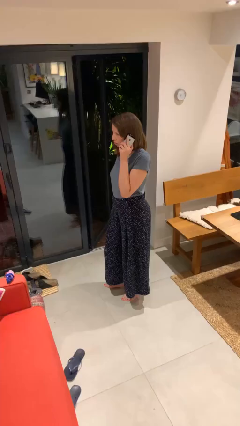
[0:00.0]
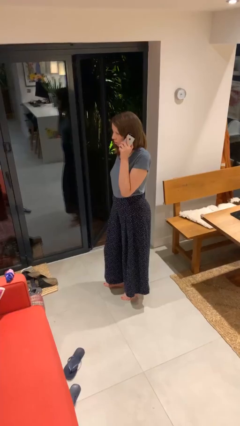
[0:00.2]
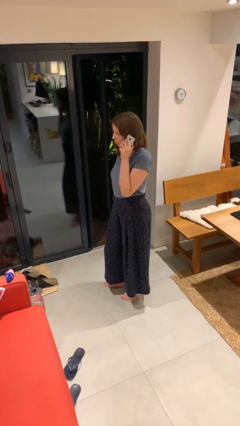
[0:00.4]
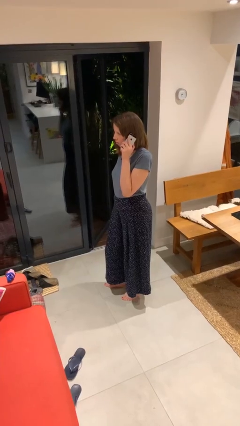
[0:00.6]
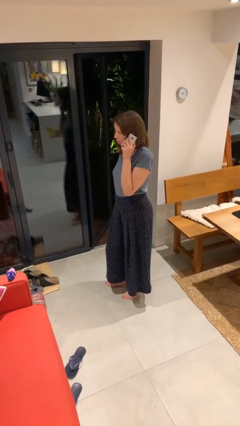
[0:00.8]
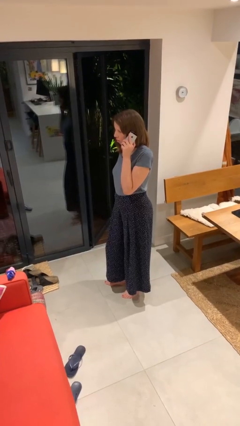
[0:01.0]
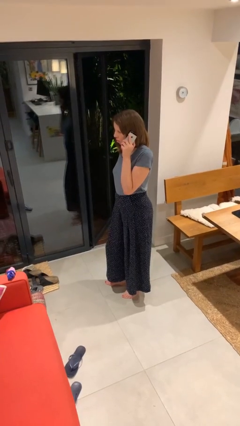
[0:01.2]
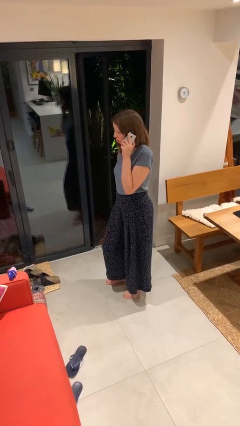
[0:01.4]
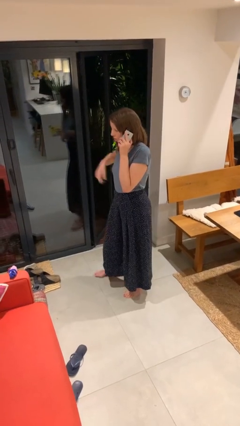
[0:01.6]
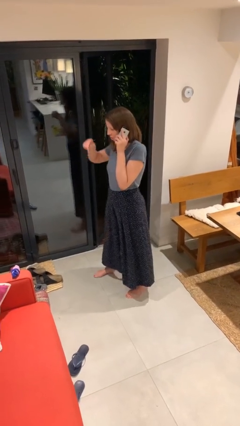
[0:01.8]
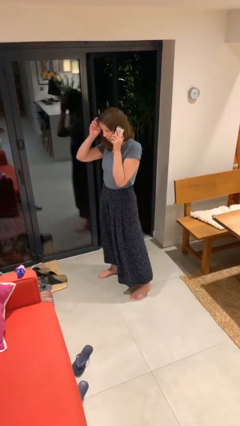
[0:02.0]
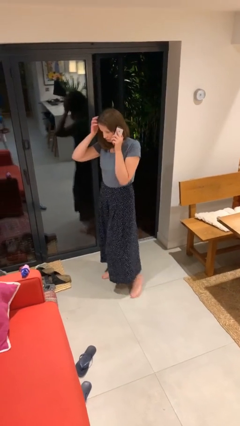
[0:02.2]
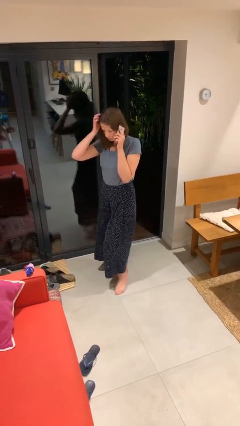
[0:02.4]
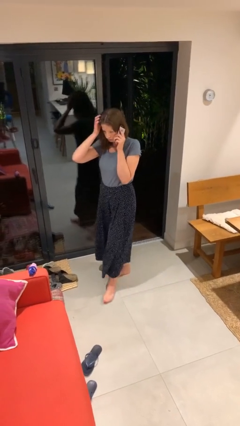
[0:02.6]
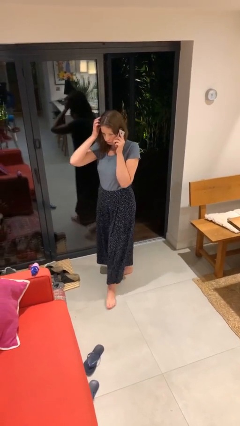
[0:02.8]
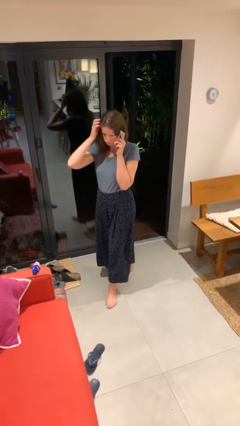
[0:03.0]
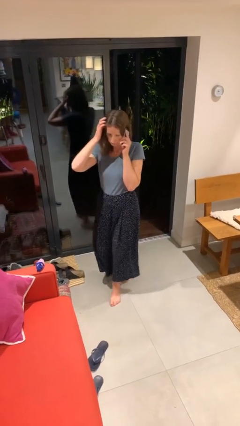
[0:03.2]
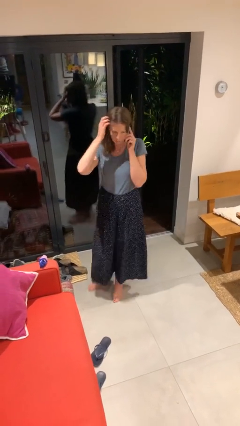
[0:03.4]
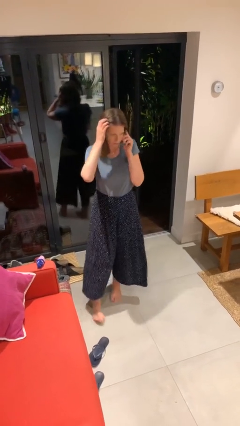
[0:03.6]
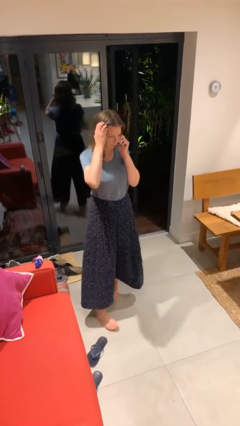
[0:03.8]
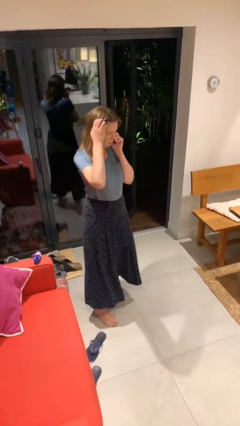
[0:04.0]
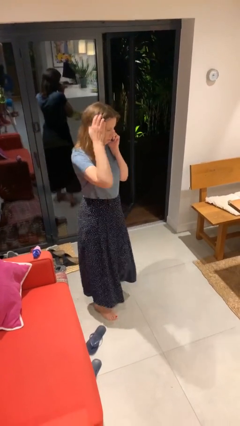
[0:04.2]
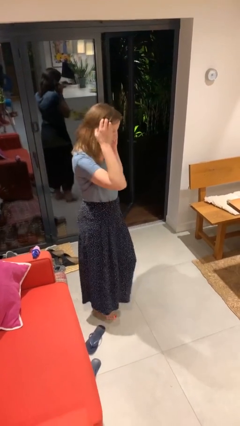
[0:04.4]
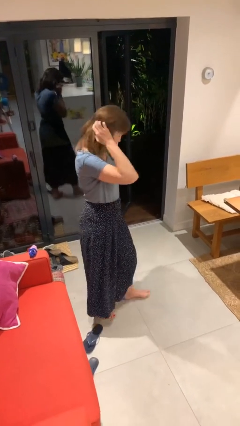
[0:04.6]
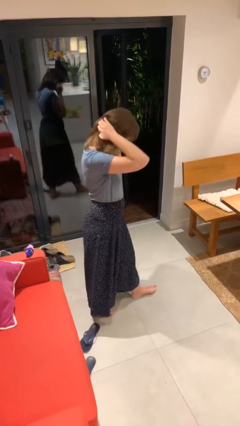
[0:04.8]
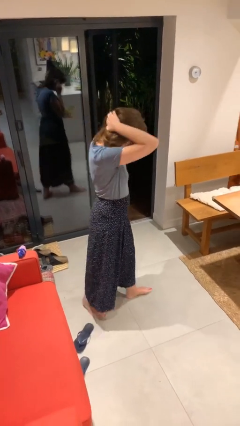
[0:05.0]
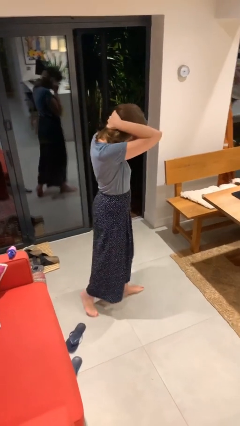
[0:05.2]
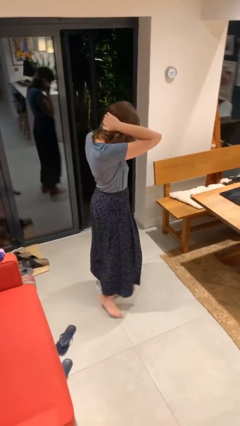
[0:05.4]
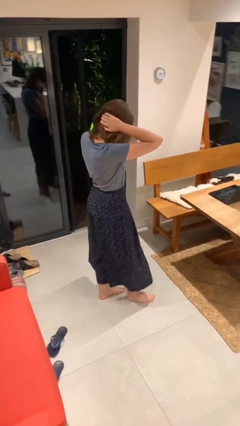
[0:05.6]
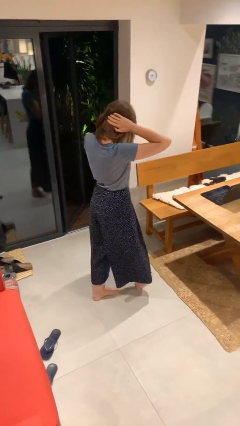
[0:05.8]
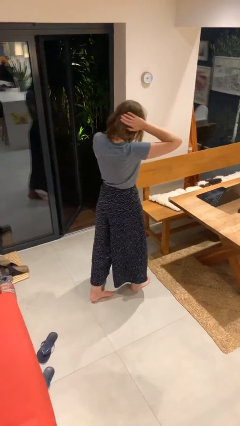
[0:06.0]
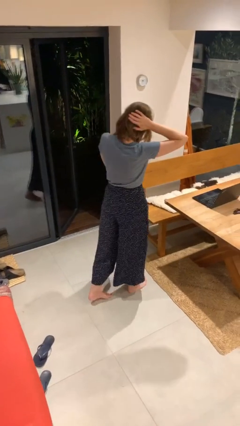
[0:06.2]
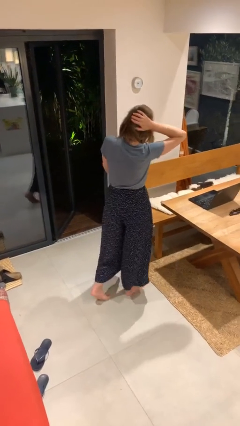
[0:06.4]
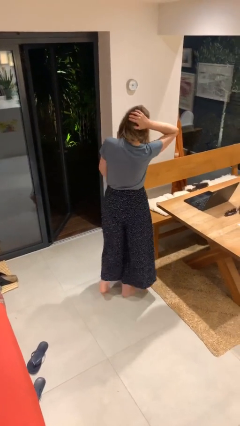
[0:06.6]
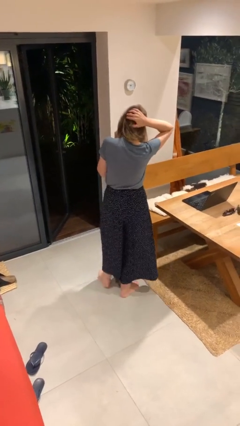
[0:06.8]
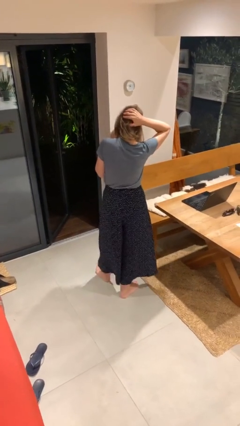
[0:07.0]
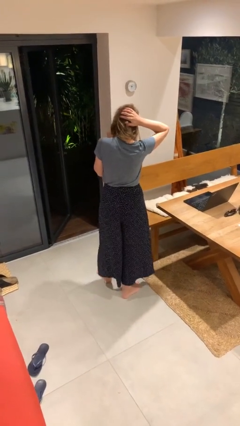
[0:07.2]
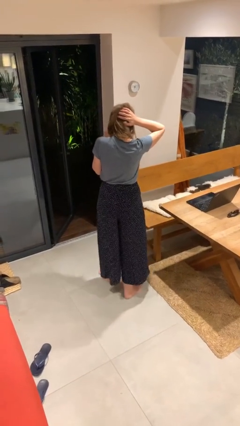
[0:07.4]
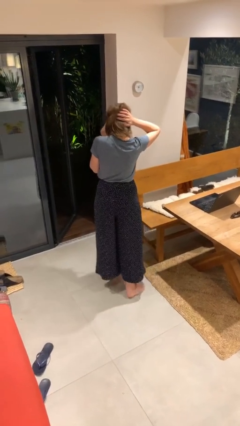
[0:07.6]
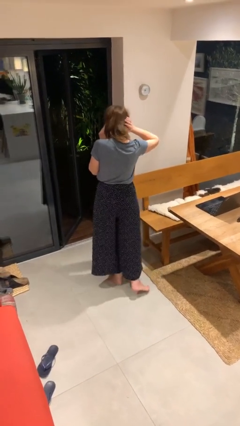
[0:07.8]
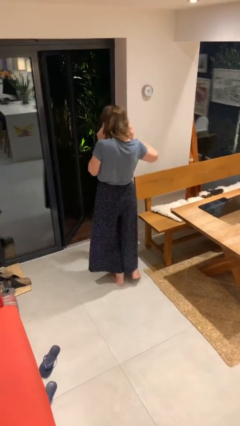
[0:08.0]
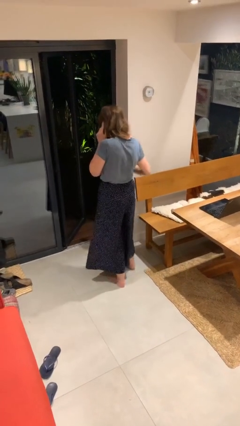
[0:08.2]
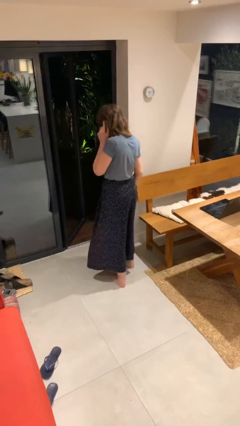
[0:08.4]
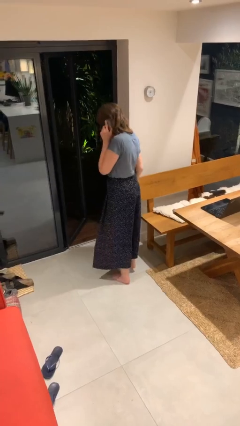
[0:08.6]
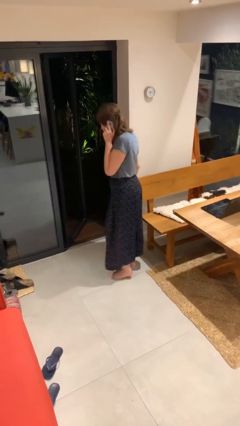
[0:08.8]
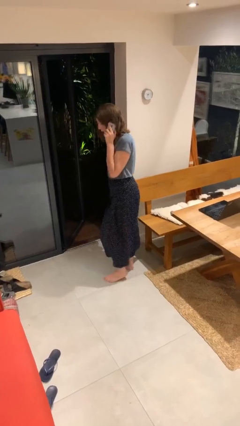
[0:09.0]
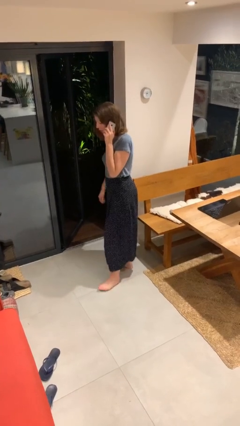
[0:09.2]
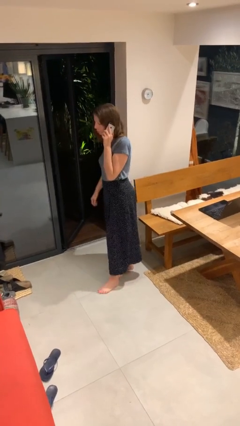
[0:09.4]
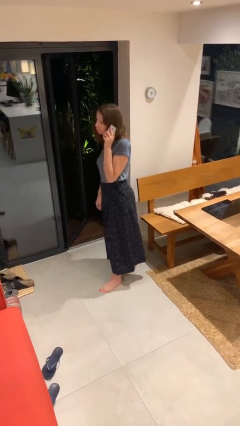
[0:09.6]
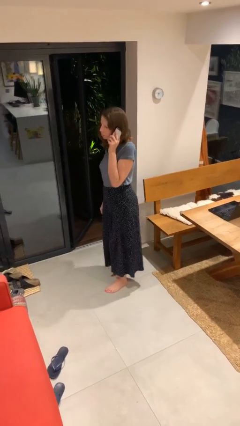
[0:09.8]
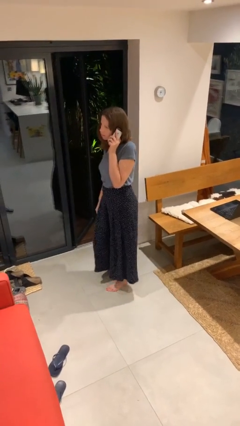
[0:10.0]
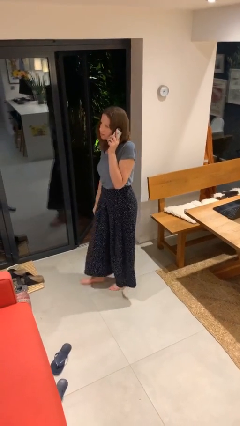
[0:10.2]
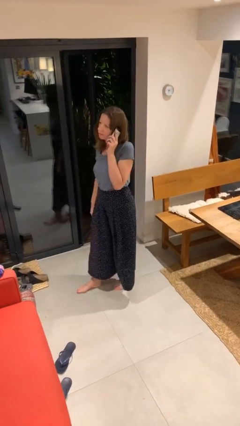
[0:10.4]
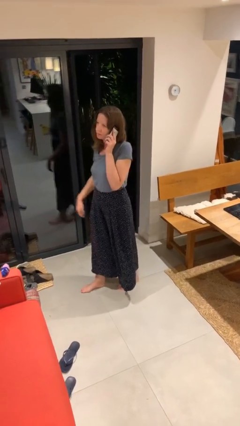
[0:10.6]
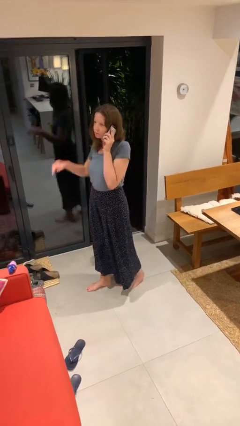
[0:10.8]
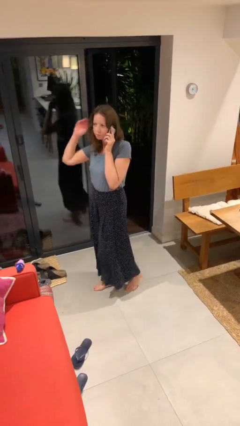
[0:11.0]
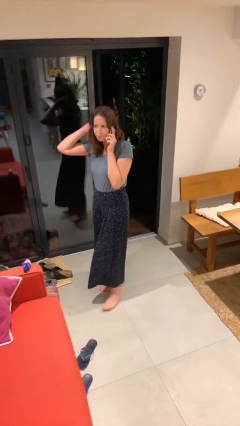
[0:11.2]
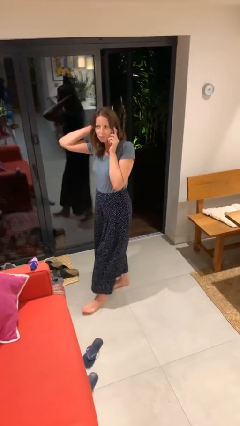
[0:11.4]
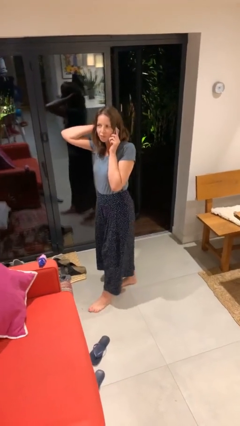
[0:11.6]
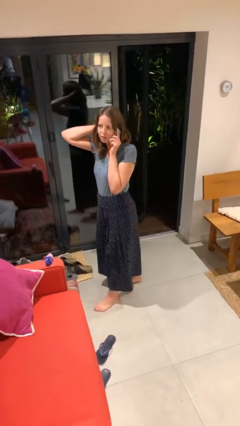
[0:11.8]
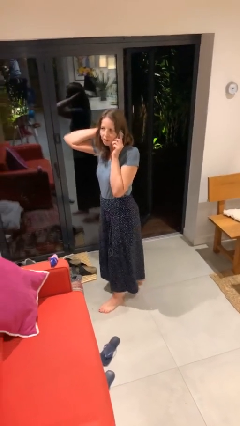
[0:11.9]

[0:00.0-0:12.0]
person talks on phone

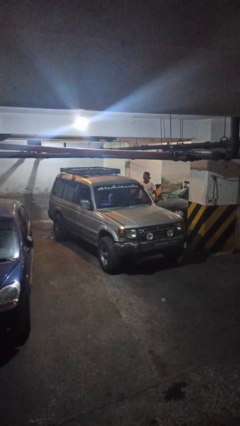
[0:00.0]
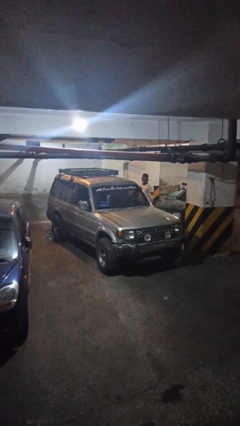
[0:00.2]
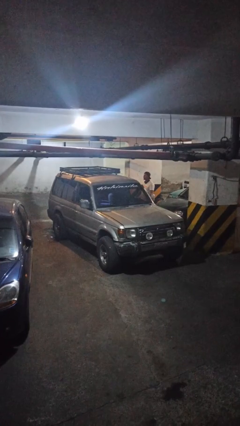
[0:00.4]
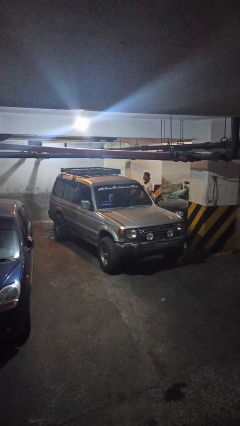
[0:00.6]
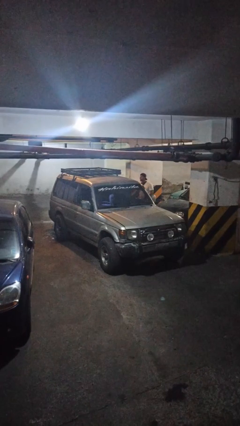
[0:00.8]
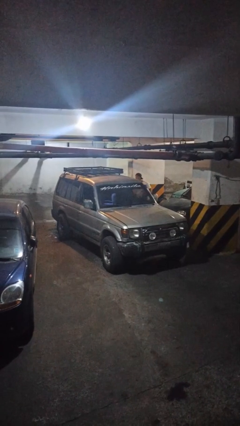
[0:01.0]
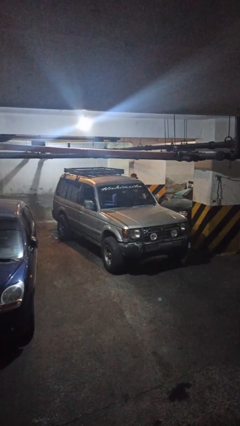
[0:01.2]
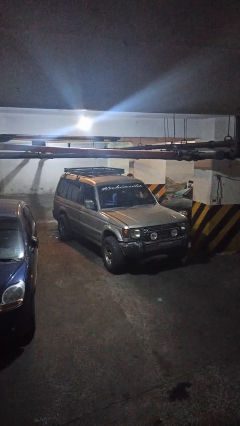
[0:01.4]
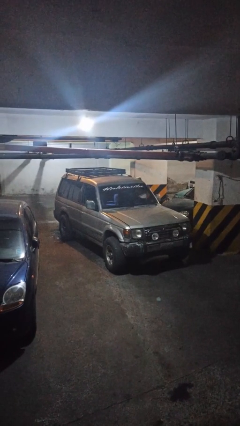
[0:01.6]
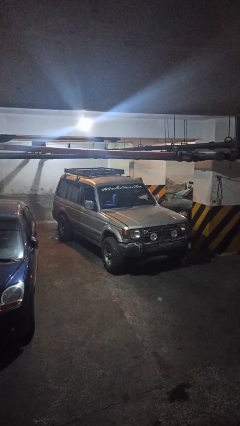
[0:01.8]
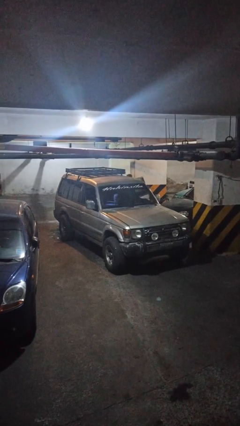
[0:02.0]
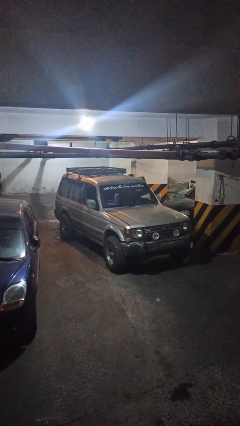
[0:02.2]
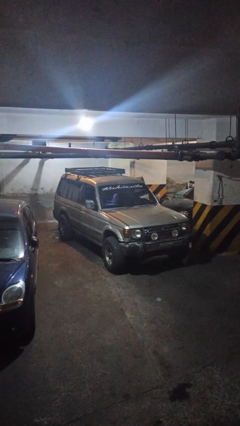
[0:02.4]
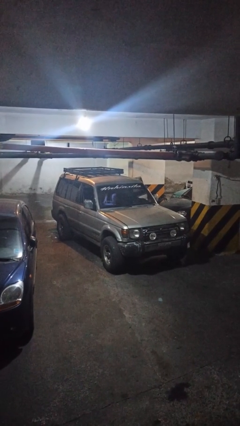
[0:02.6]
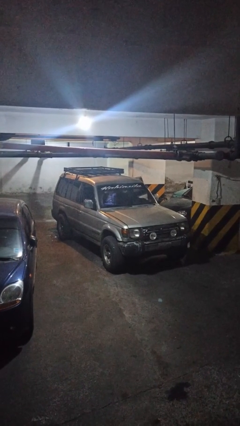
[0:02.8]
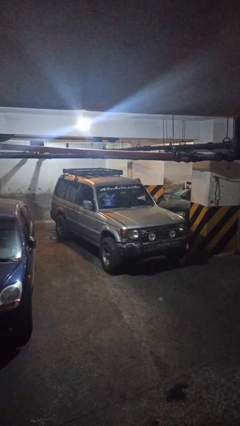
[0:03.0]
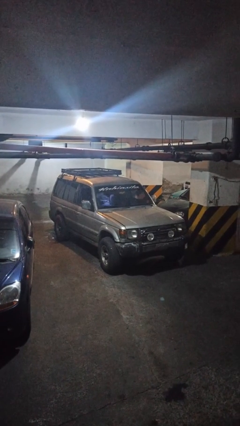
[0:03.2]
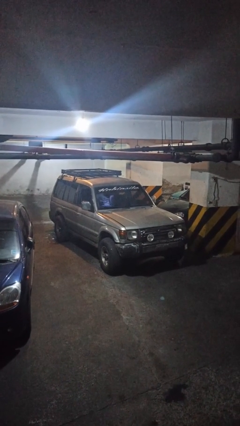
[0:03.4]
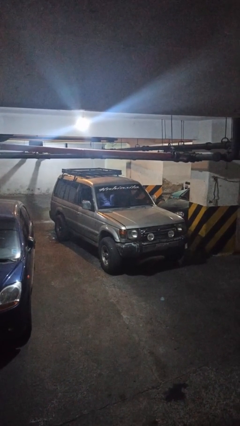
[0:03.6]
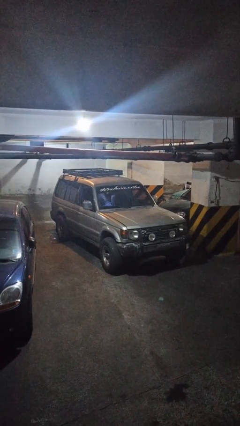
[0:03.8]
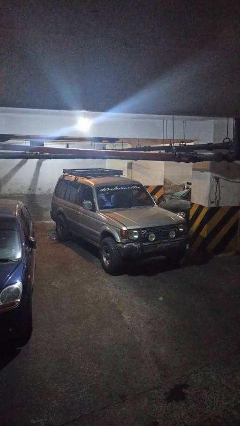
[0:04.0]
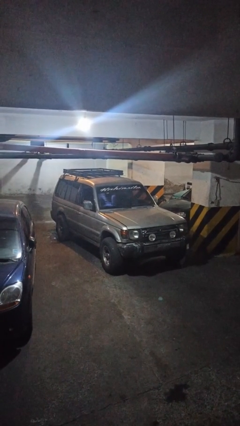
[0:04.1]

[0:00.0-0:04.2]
car picks up person

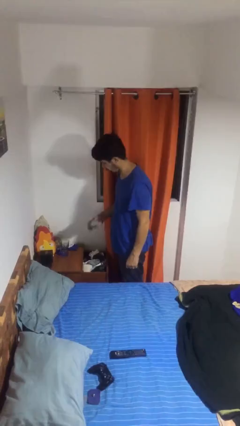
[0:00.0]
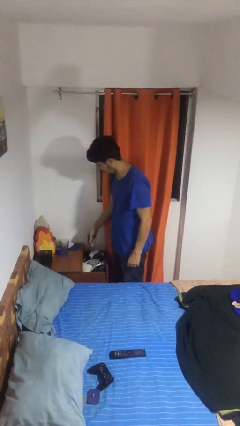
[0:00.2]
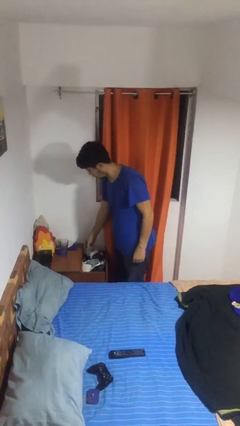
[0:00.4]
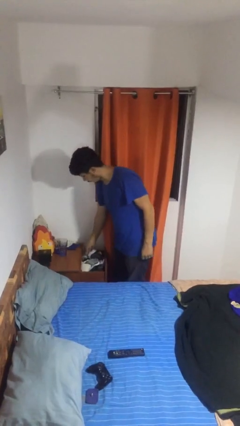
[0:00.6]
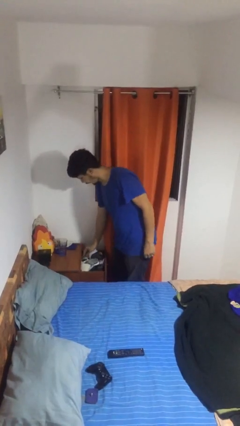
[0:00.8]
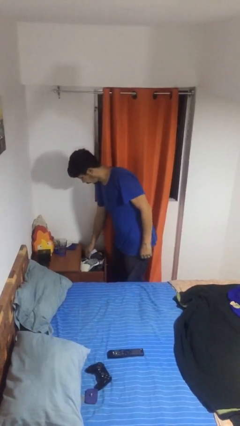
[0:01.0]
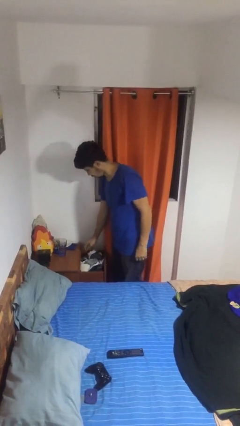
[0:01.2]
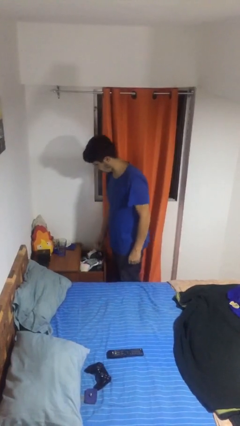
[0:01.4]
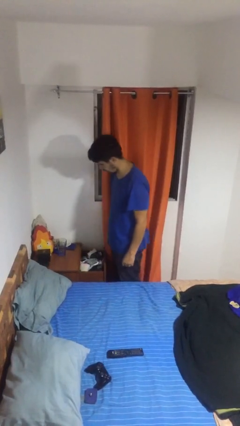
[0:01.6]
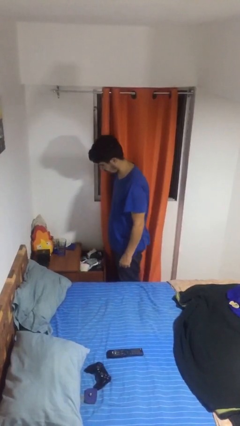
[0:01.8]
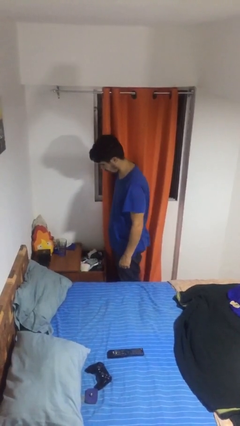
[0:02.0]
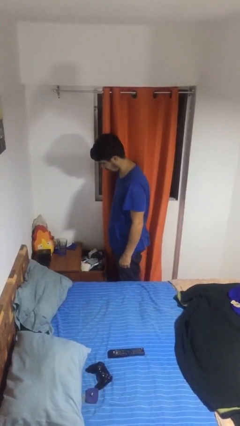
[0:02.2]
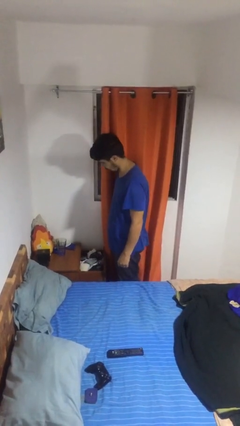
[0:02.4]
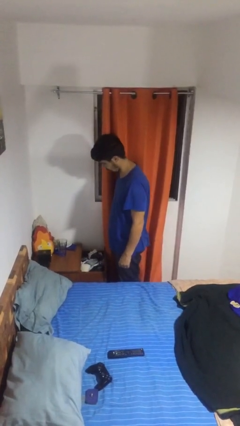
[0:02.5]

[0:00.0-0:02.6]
person puts clothes into dresser
